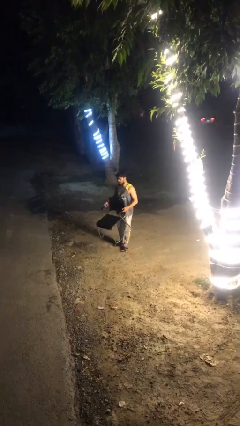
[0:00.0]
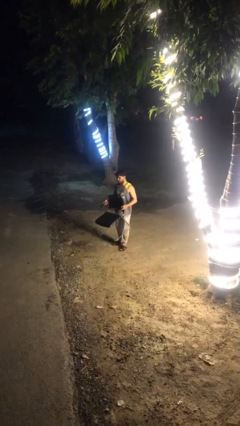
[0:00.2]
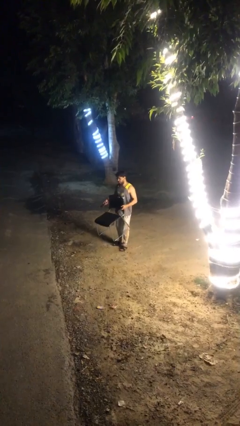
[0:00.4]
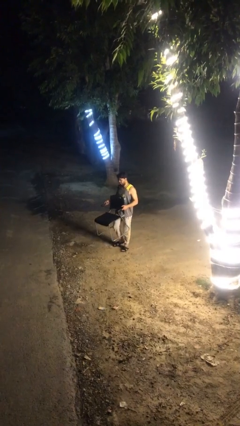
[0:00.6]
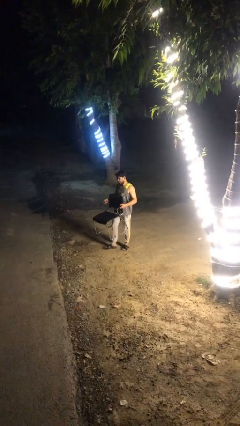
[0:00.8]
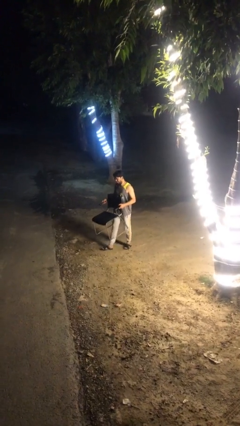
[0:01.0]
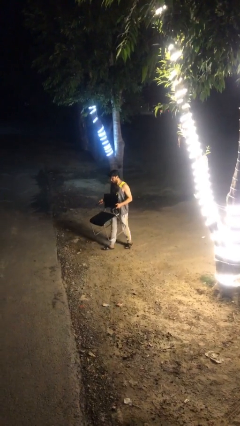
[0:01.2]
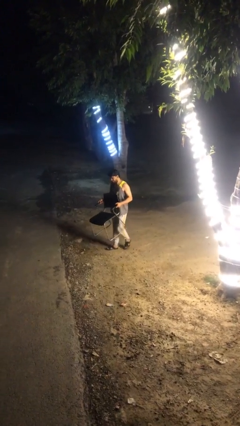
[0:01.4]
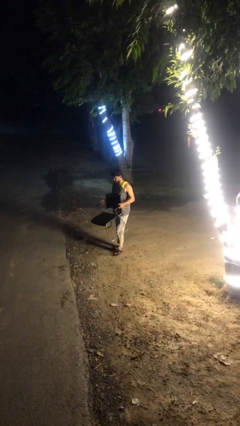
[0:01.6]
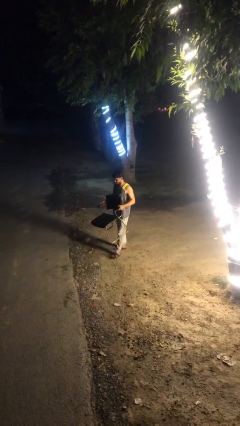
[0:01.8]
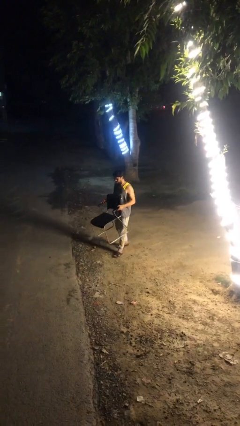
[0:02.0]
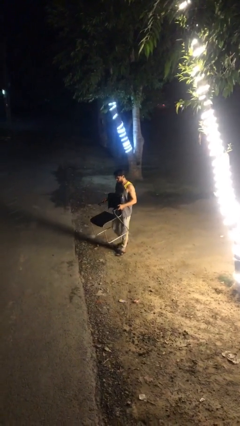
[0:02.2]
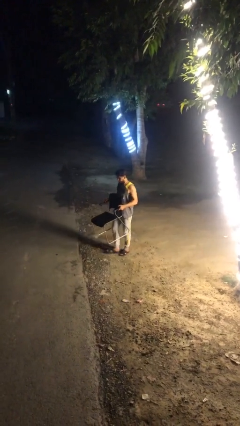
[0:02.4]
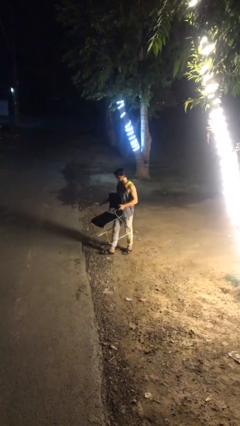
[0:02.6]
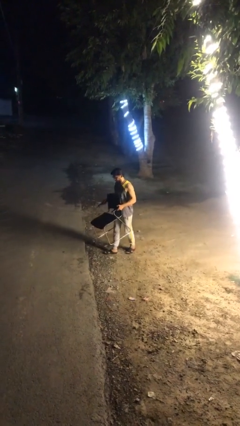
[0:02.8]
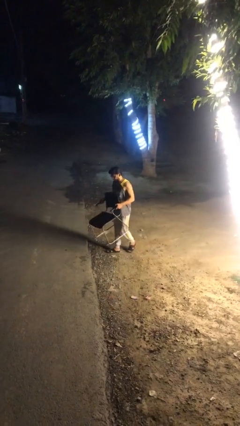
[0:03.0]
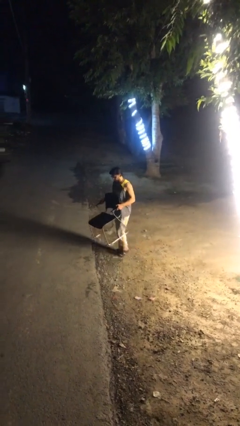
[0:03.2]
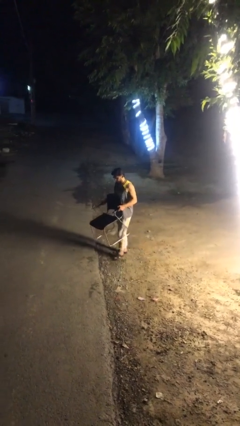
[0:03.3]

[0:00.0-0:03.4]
person carries heavy object

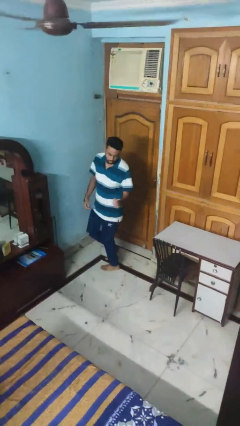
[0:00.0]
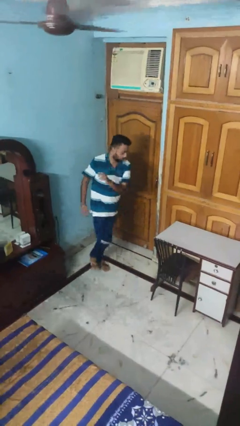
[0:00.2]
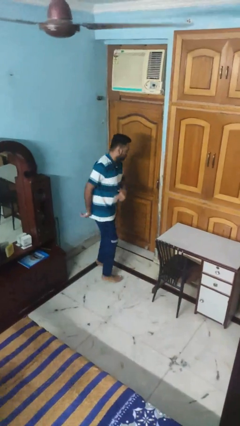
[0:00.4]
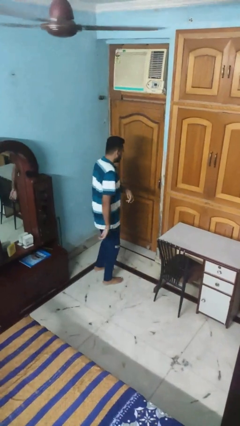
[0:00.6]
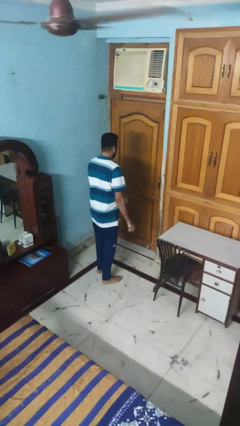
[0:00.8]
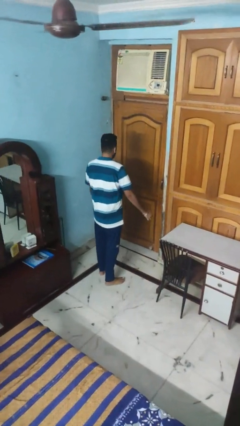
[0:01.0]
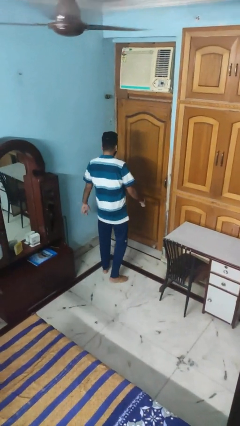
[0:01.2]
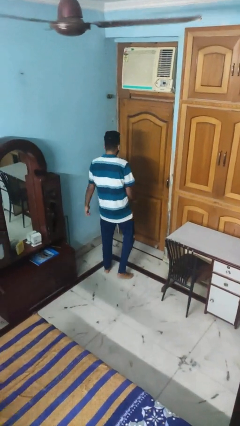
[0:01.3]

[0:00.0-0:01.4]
person twirls

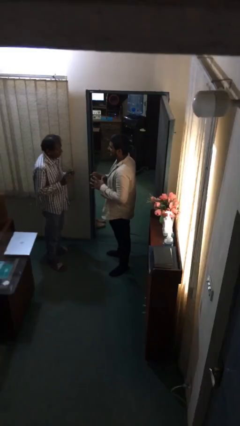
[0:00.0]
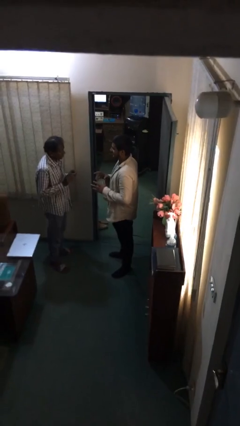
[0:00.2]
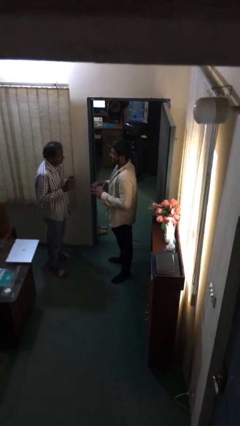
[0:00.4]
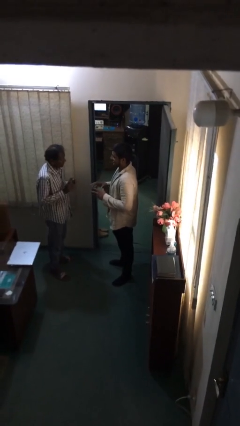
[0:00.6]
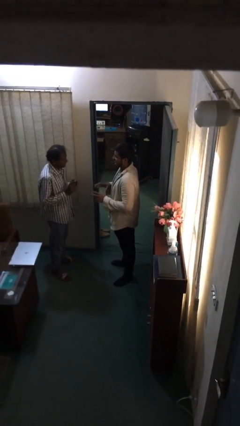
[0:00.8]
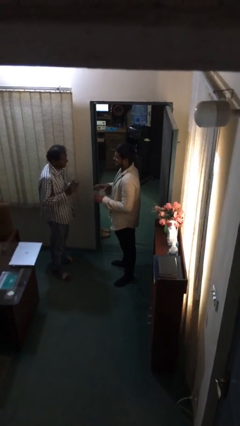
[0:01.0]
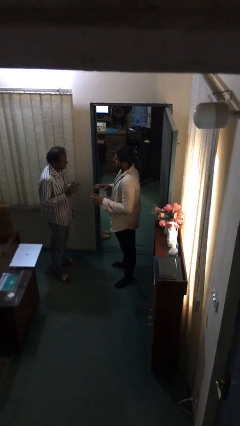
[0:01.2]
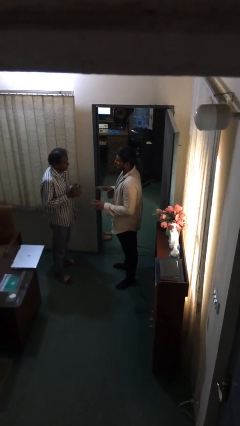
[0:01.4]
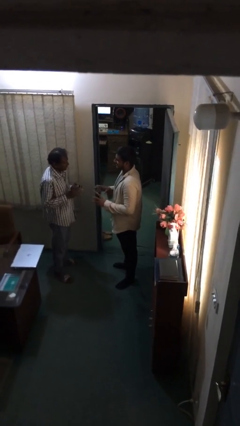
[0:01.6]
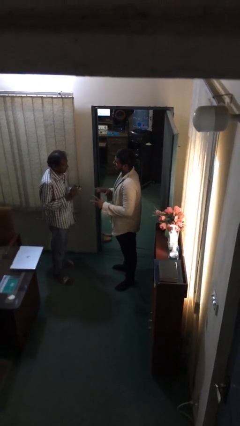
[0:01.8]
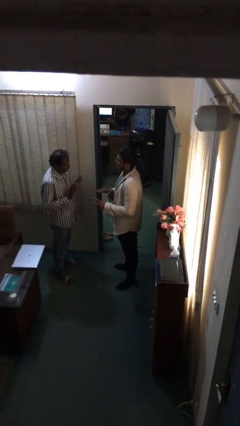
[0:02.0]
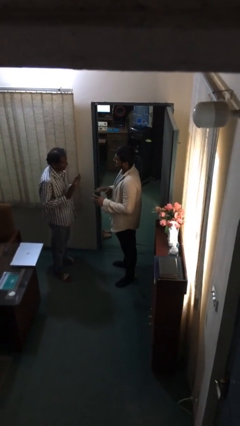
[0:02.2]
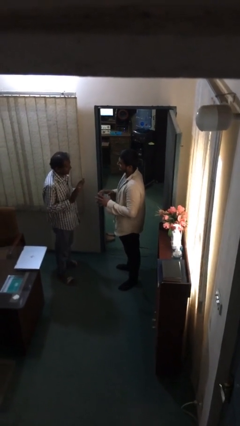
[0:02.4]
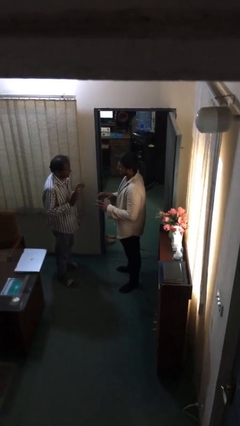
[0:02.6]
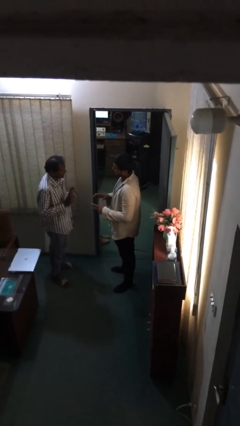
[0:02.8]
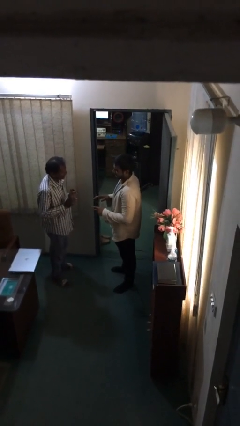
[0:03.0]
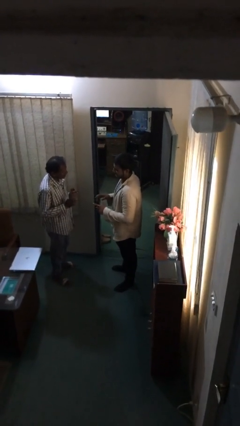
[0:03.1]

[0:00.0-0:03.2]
person talks to person

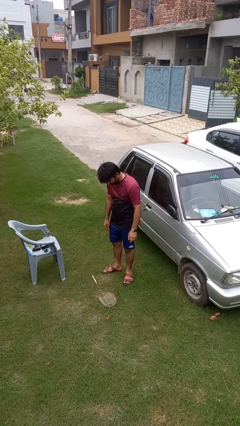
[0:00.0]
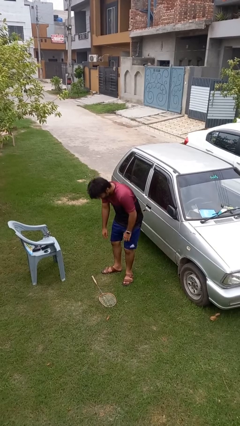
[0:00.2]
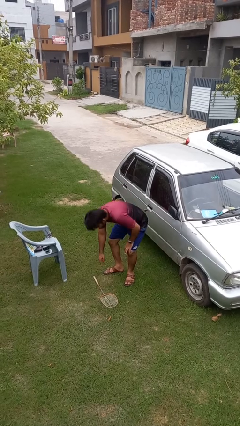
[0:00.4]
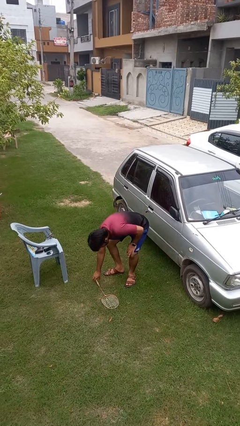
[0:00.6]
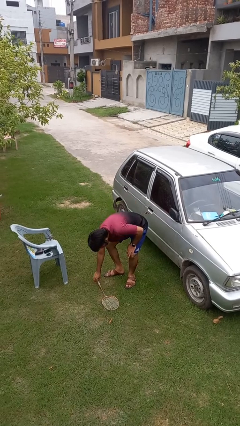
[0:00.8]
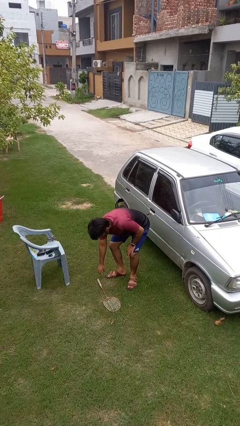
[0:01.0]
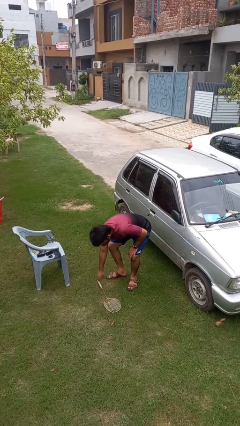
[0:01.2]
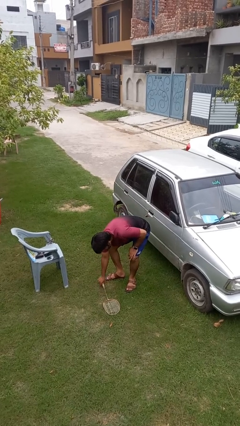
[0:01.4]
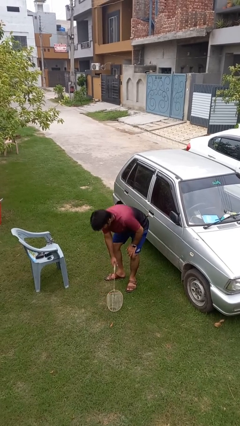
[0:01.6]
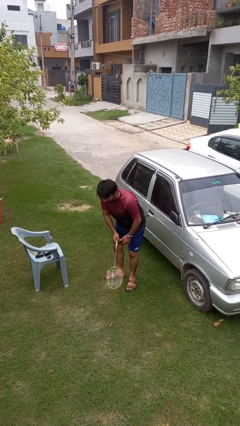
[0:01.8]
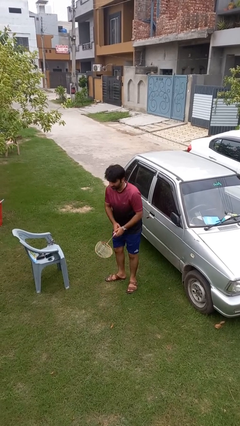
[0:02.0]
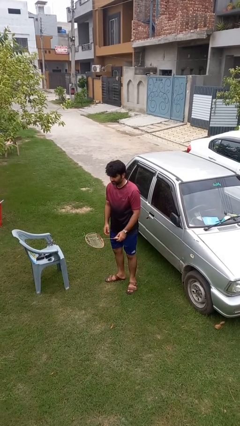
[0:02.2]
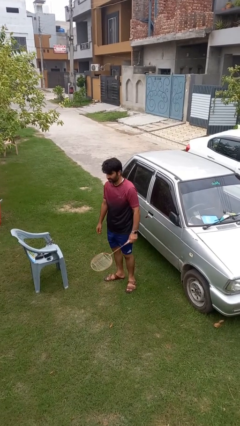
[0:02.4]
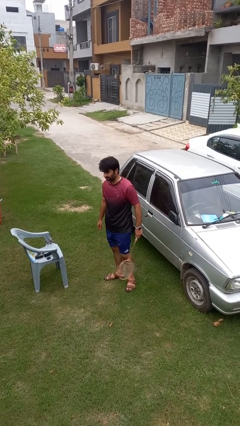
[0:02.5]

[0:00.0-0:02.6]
person picks up object from floor

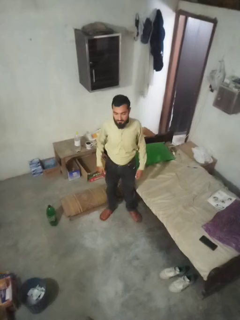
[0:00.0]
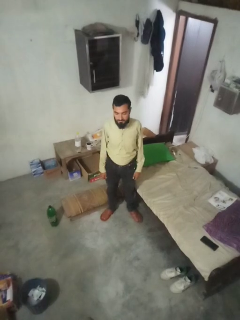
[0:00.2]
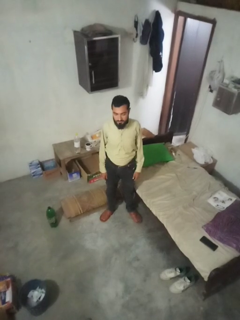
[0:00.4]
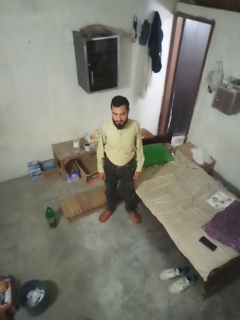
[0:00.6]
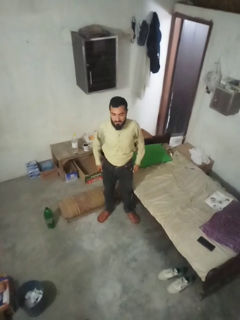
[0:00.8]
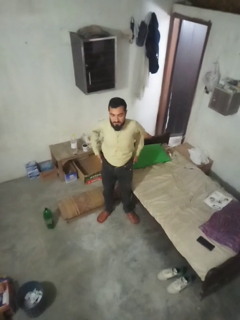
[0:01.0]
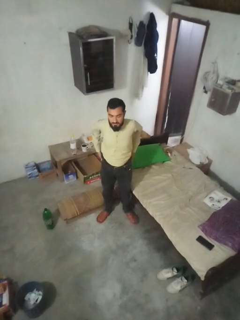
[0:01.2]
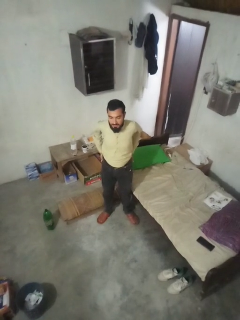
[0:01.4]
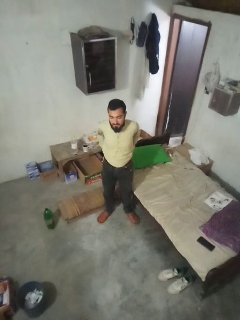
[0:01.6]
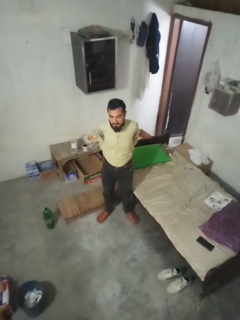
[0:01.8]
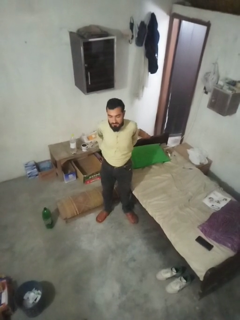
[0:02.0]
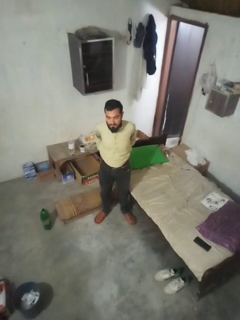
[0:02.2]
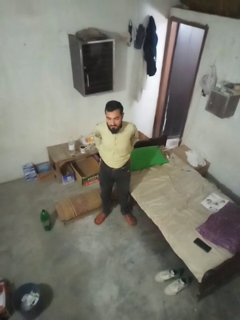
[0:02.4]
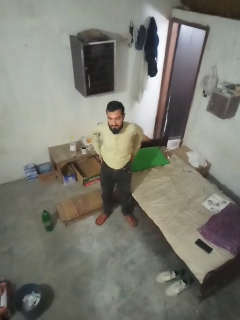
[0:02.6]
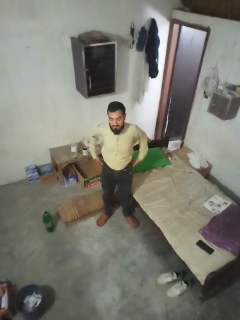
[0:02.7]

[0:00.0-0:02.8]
person puts hands in back pockets

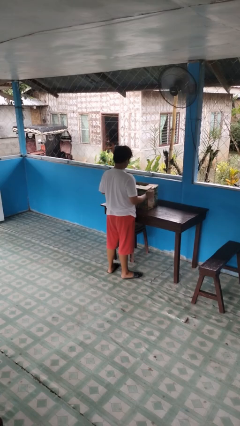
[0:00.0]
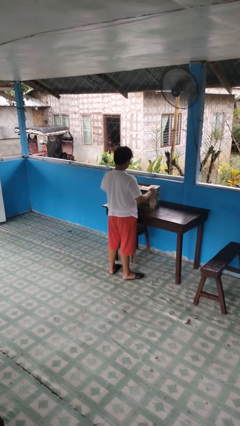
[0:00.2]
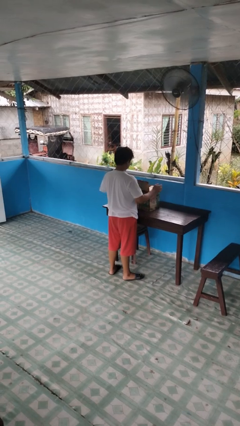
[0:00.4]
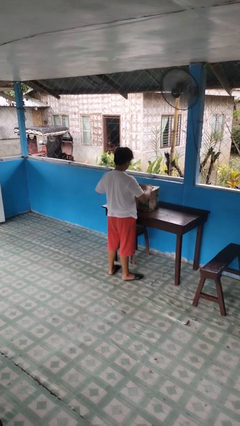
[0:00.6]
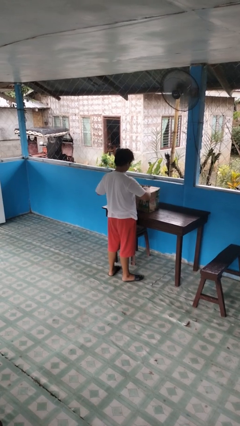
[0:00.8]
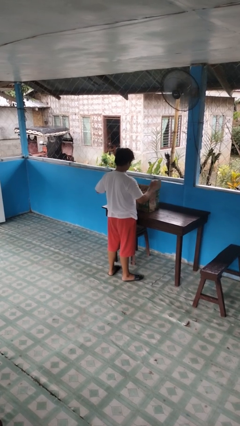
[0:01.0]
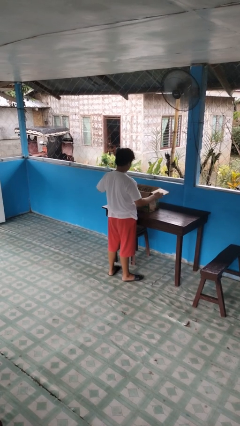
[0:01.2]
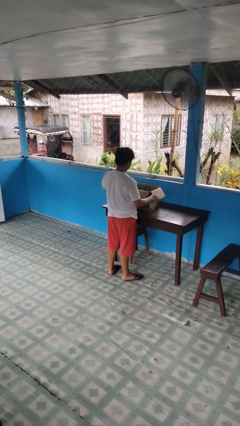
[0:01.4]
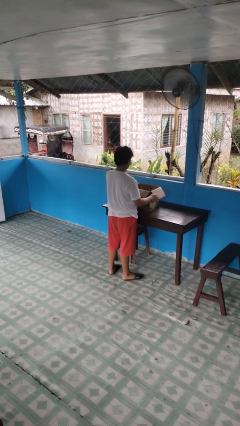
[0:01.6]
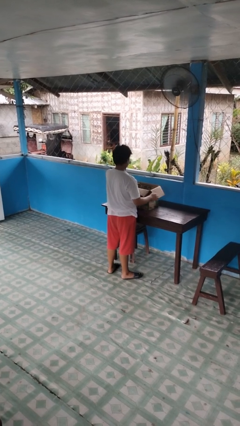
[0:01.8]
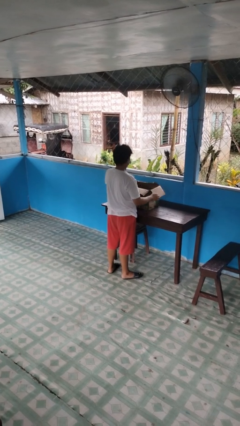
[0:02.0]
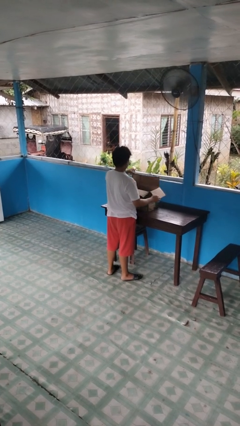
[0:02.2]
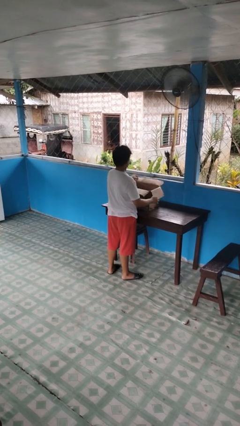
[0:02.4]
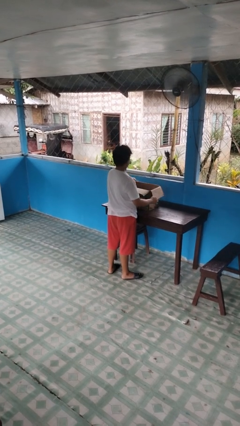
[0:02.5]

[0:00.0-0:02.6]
person opens box

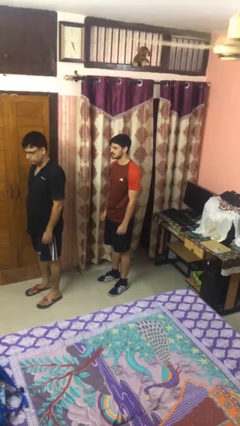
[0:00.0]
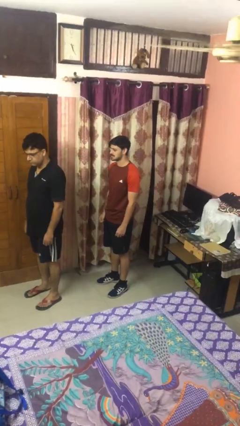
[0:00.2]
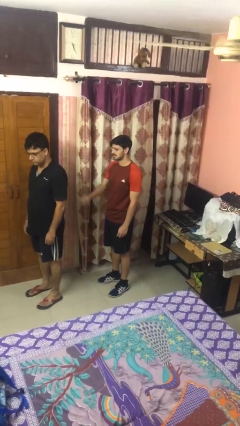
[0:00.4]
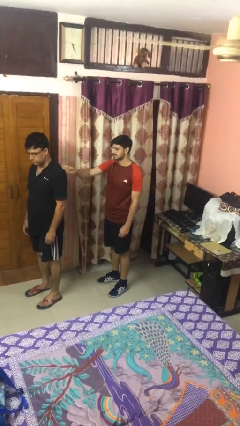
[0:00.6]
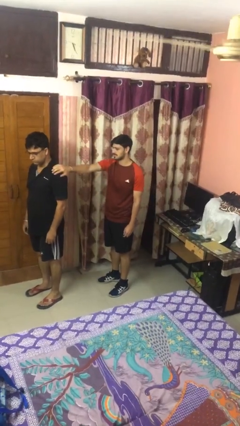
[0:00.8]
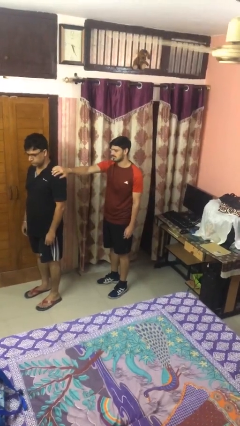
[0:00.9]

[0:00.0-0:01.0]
person grabs person by shoulder

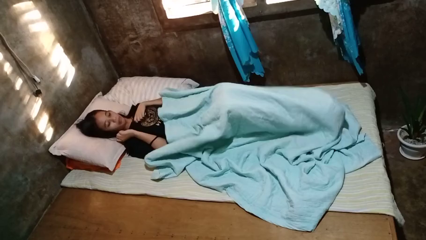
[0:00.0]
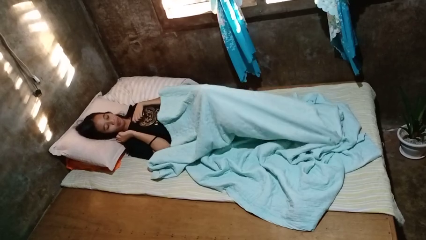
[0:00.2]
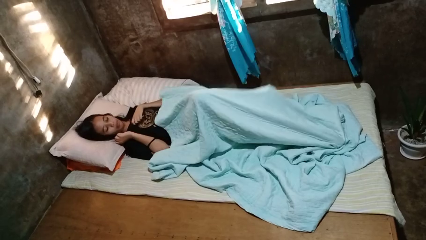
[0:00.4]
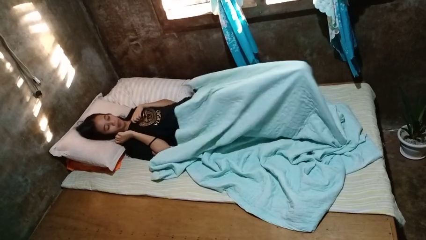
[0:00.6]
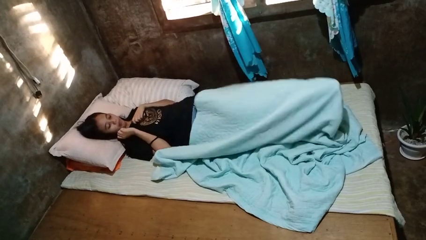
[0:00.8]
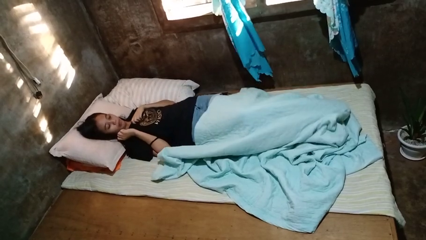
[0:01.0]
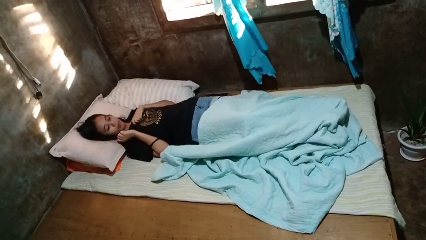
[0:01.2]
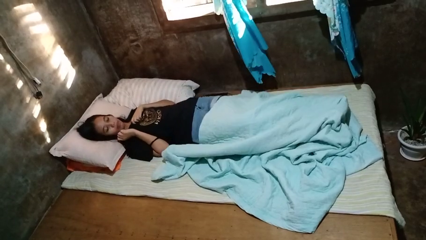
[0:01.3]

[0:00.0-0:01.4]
person uncovers with bedsheets
